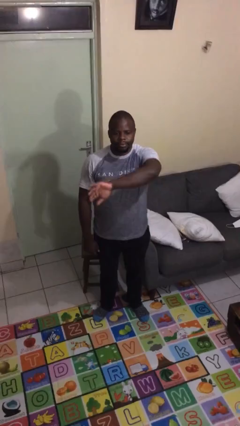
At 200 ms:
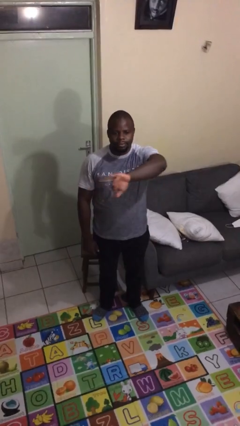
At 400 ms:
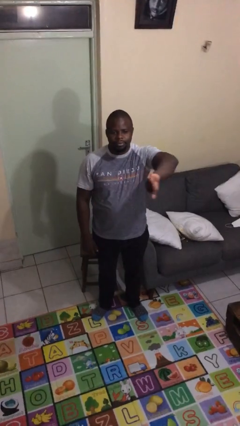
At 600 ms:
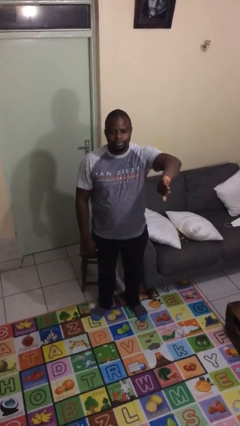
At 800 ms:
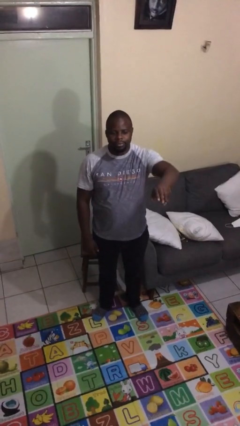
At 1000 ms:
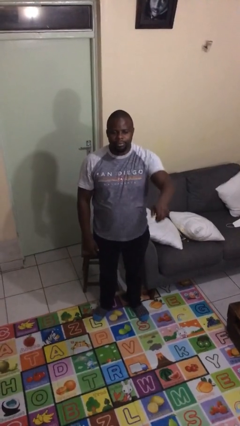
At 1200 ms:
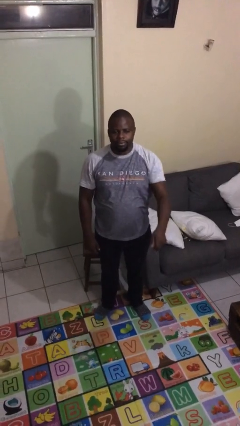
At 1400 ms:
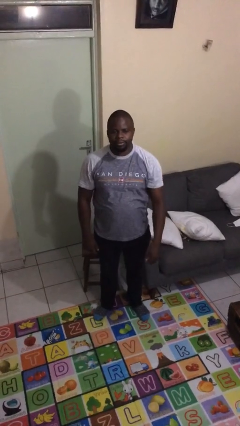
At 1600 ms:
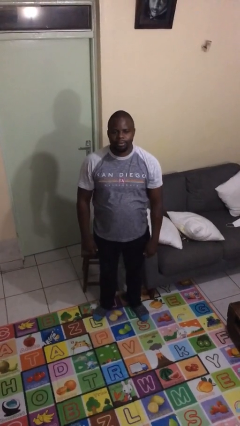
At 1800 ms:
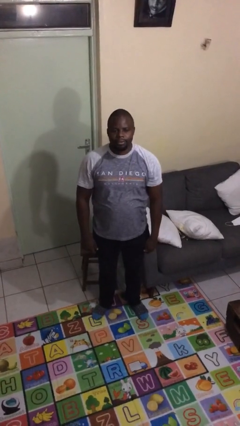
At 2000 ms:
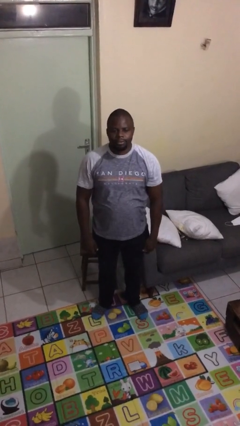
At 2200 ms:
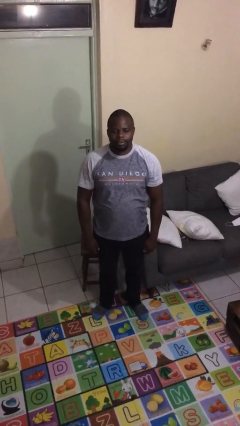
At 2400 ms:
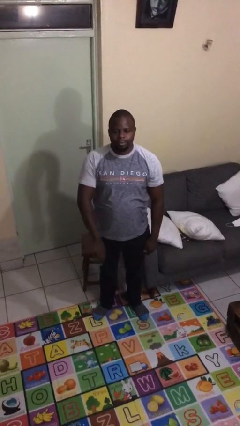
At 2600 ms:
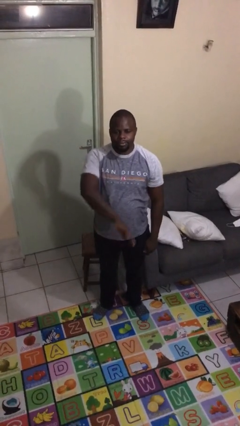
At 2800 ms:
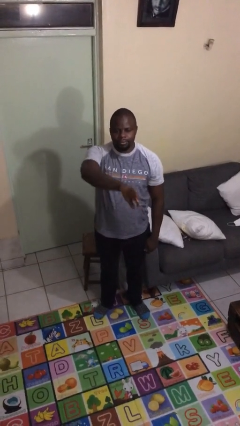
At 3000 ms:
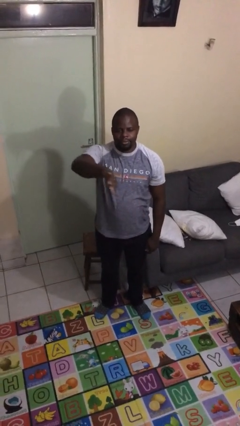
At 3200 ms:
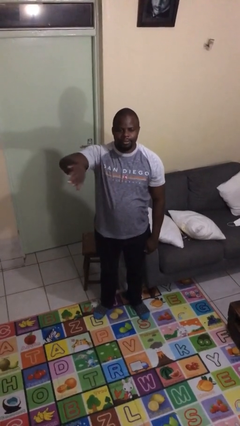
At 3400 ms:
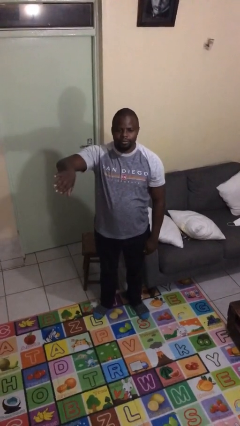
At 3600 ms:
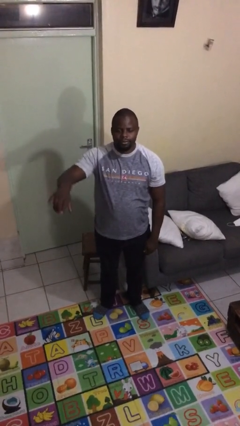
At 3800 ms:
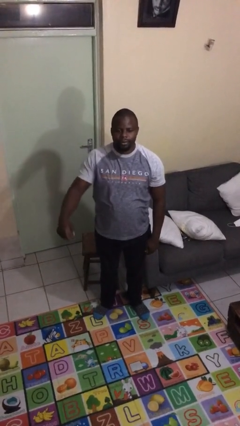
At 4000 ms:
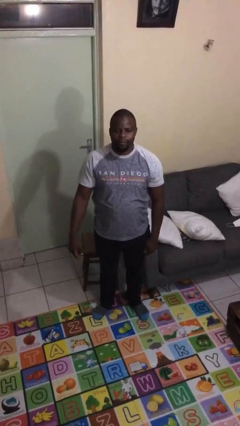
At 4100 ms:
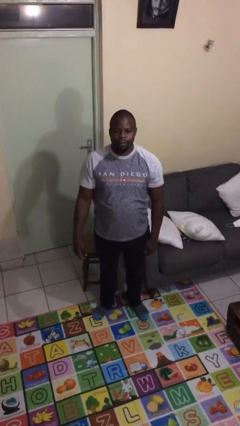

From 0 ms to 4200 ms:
person gestures swipe left

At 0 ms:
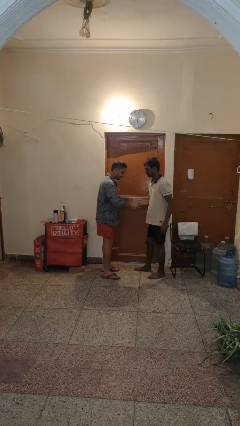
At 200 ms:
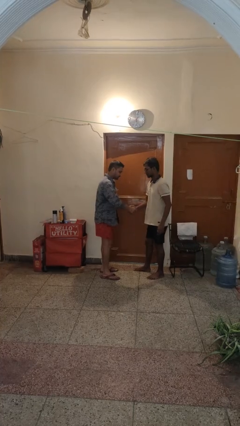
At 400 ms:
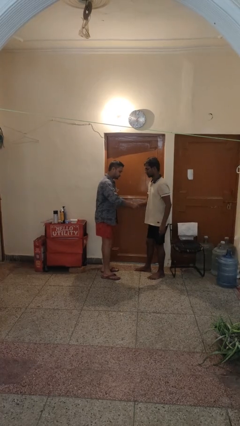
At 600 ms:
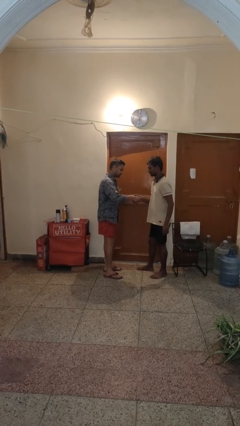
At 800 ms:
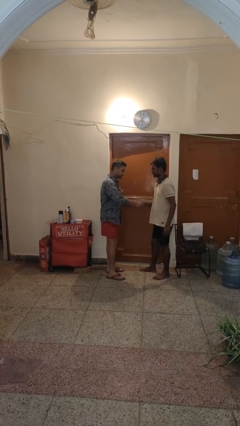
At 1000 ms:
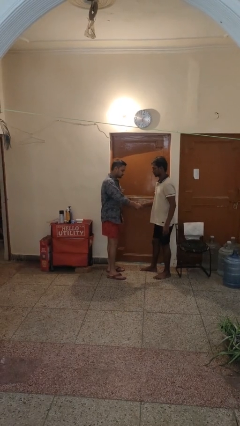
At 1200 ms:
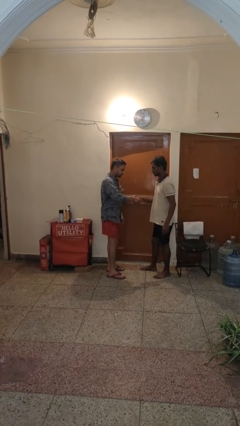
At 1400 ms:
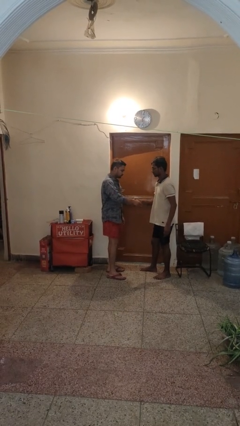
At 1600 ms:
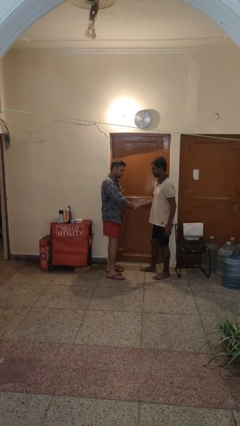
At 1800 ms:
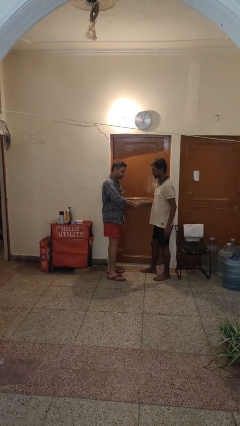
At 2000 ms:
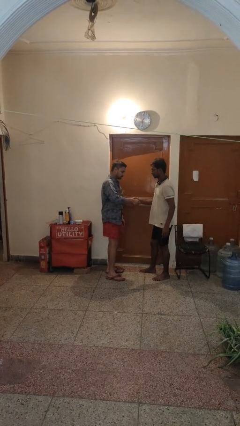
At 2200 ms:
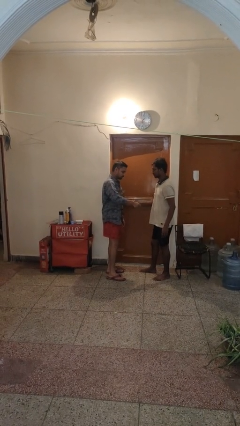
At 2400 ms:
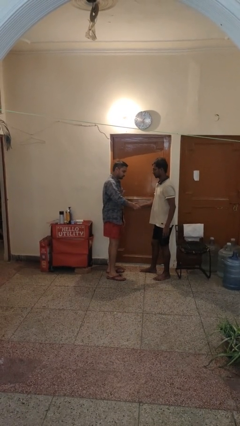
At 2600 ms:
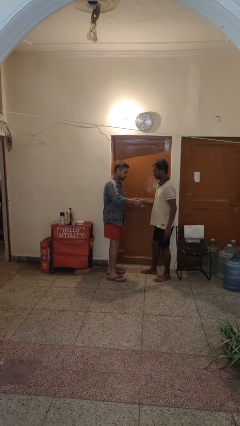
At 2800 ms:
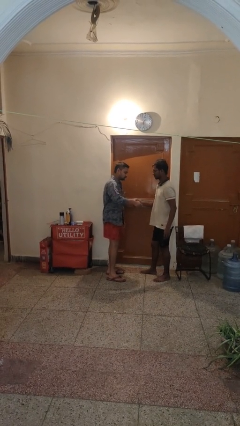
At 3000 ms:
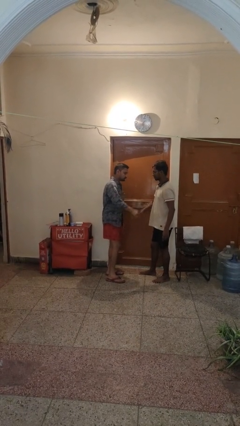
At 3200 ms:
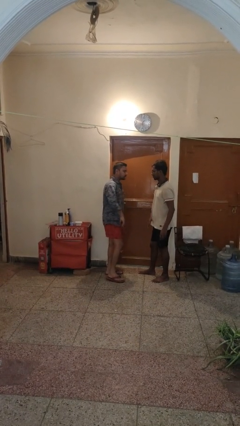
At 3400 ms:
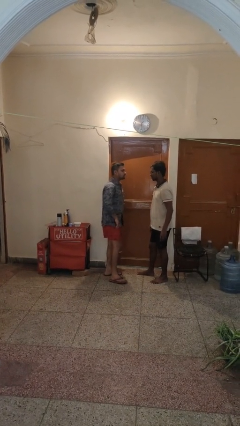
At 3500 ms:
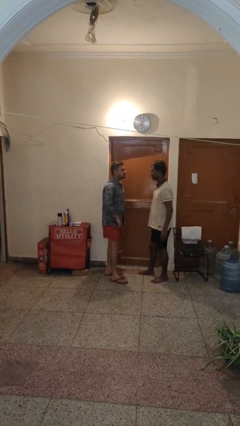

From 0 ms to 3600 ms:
person highfives hand

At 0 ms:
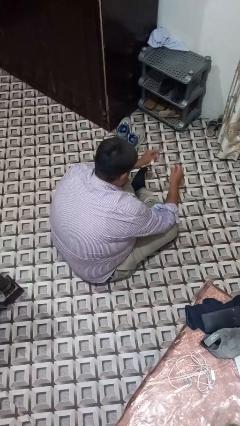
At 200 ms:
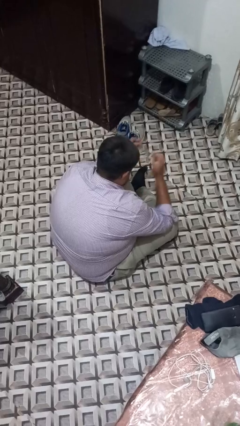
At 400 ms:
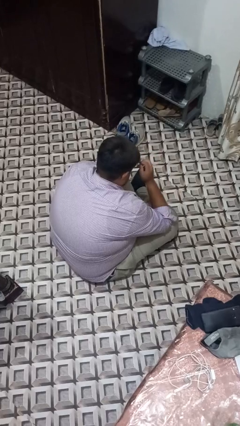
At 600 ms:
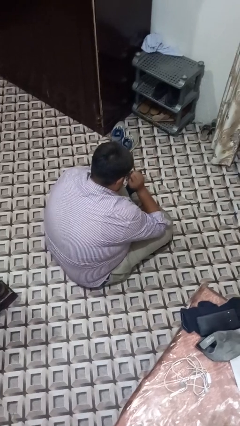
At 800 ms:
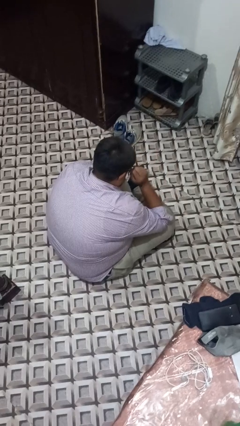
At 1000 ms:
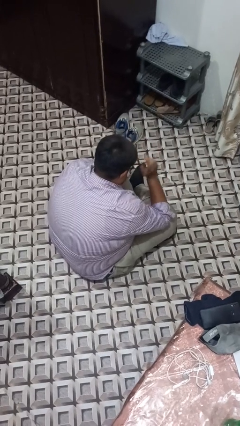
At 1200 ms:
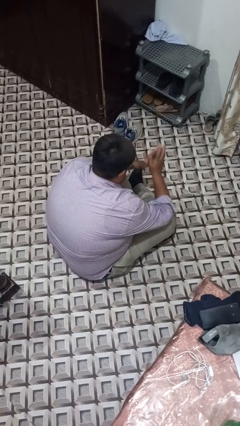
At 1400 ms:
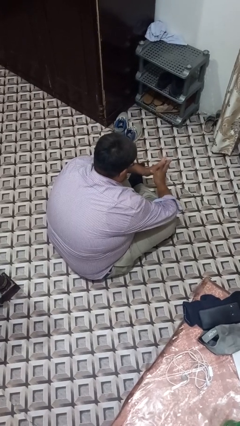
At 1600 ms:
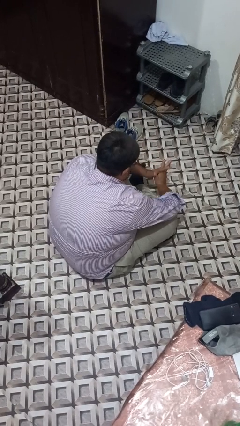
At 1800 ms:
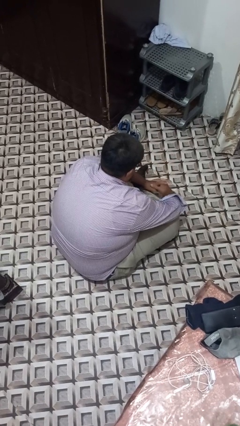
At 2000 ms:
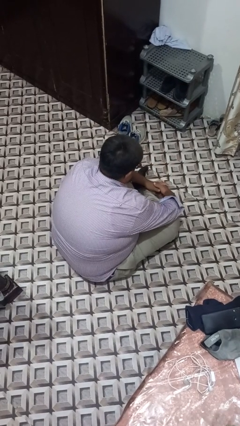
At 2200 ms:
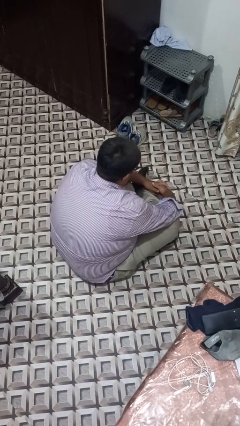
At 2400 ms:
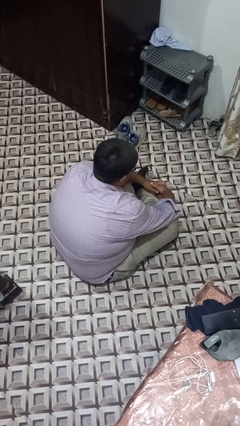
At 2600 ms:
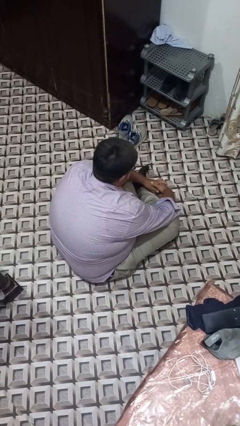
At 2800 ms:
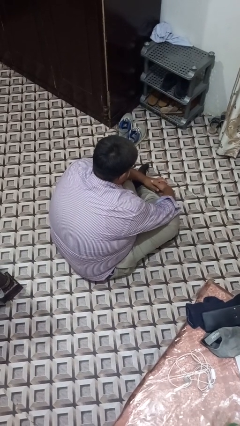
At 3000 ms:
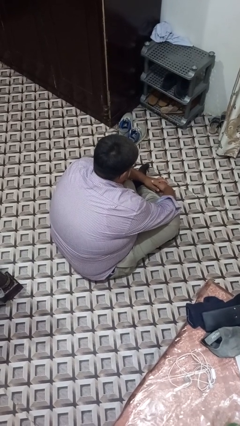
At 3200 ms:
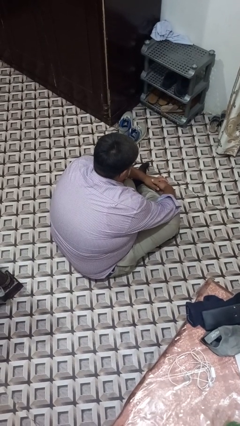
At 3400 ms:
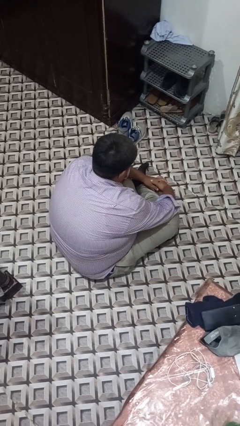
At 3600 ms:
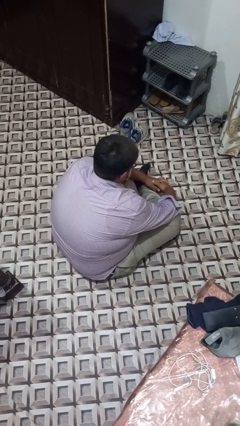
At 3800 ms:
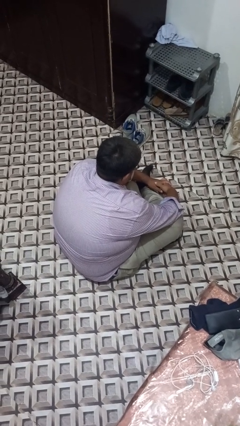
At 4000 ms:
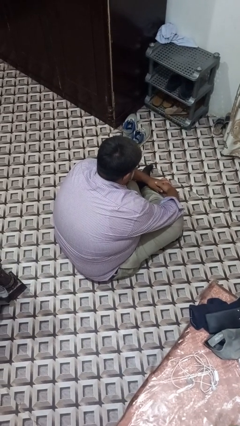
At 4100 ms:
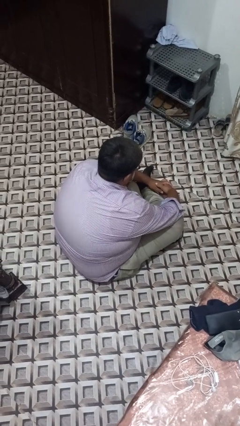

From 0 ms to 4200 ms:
person puts on glasses

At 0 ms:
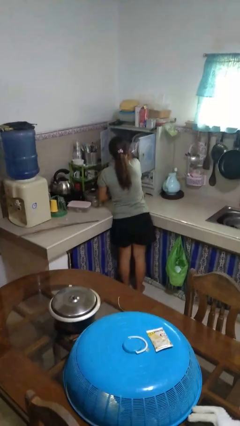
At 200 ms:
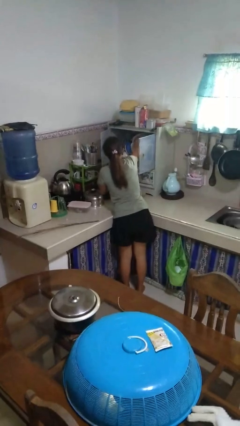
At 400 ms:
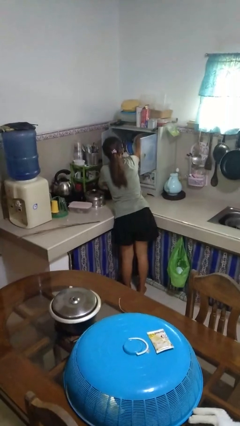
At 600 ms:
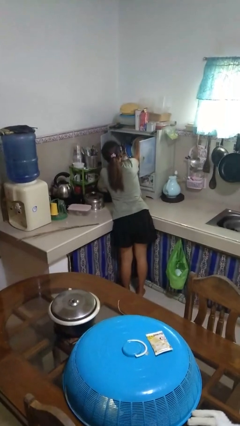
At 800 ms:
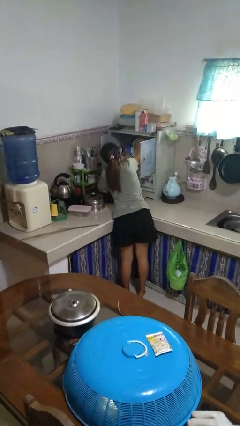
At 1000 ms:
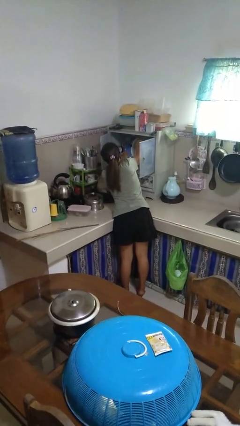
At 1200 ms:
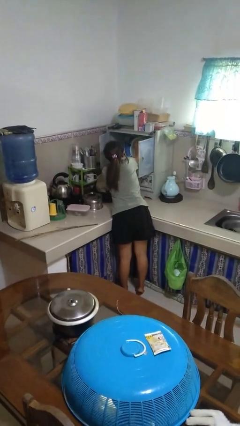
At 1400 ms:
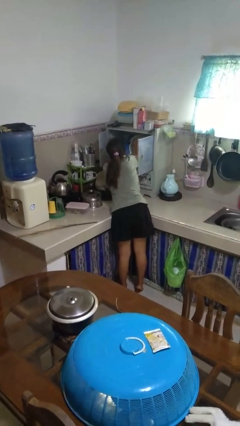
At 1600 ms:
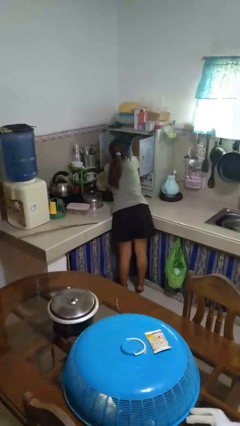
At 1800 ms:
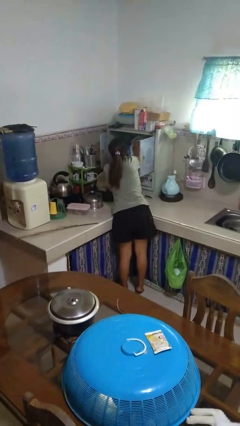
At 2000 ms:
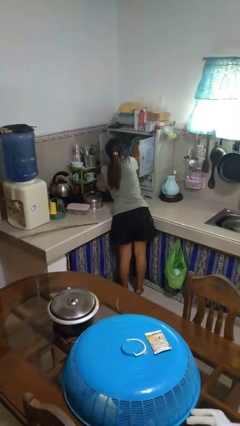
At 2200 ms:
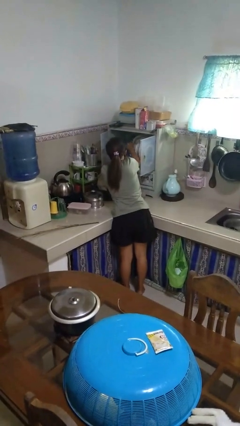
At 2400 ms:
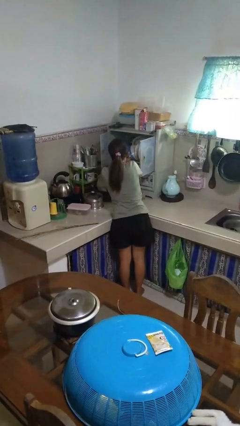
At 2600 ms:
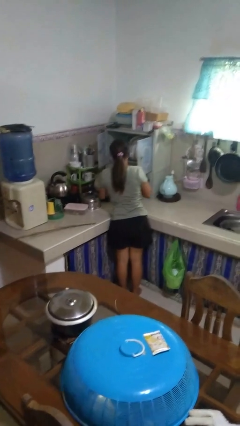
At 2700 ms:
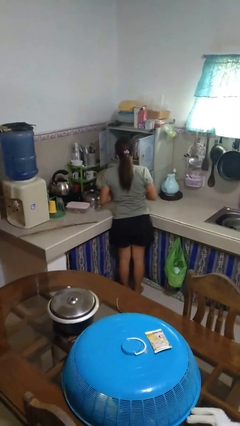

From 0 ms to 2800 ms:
person searches in kitchen drawer

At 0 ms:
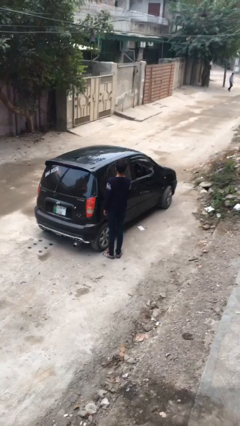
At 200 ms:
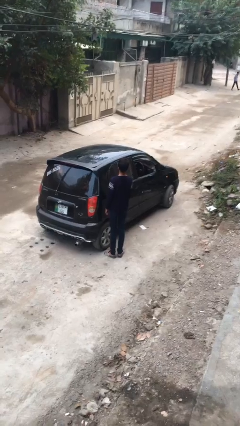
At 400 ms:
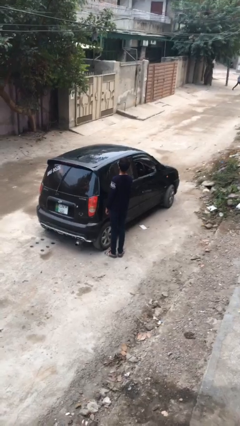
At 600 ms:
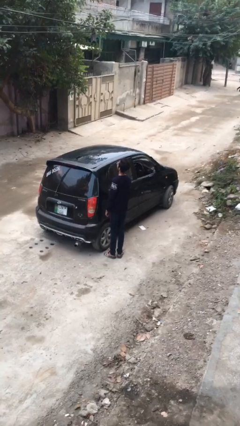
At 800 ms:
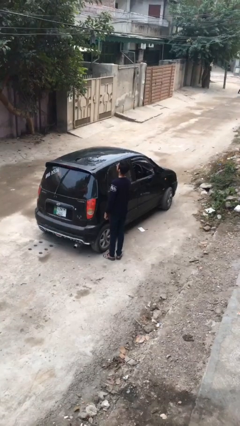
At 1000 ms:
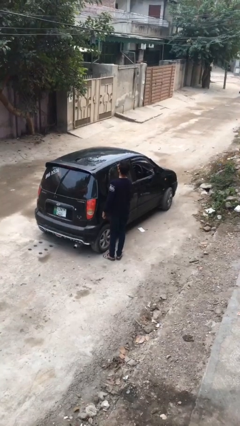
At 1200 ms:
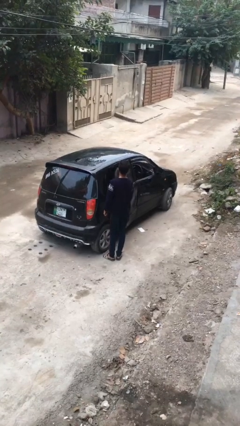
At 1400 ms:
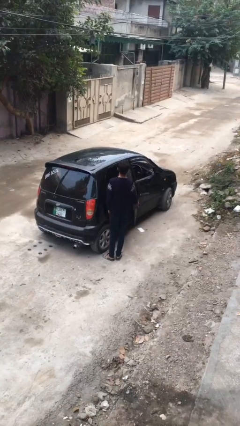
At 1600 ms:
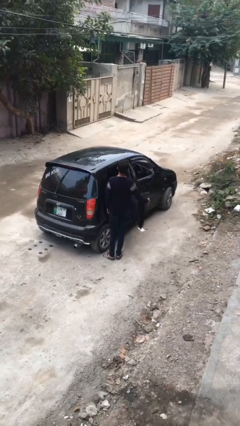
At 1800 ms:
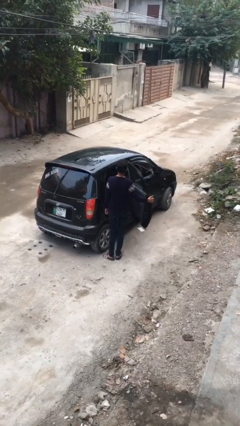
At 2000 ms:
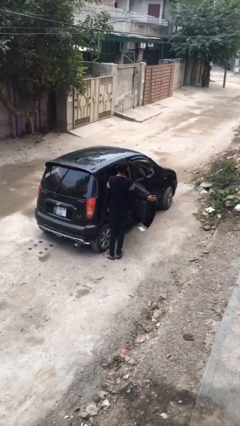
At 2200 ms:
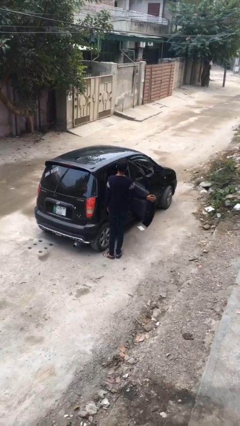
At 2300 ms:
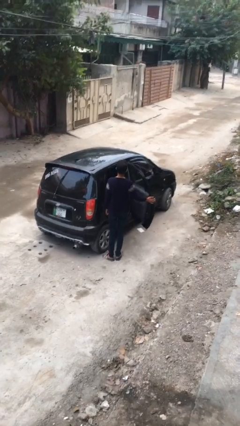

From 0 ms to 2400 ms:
person opens car door
